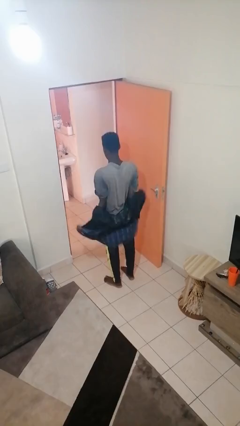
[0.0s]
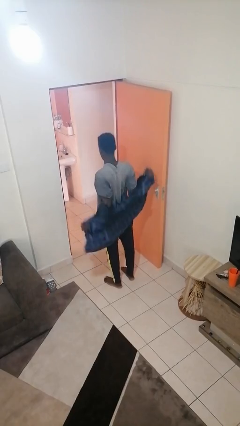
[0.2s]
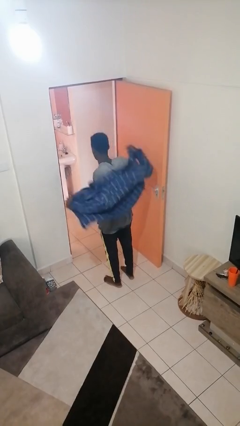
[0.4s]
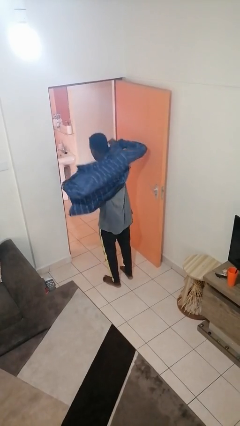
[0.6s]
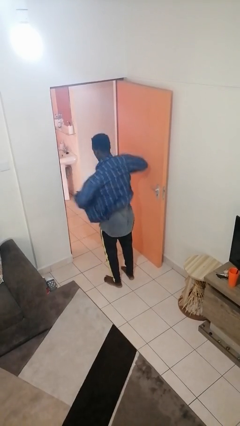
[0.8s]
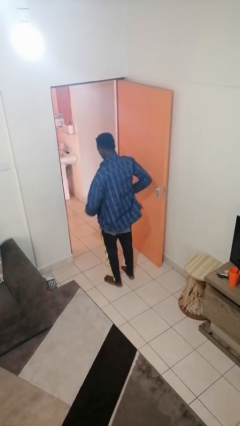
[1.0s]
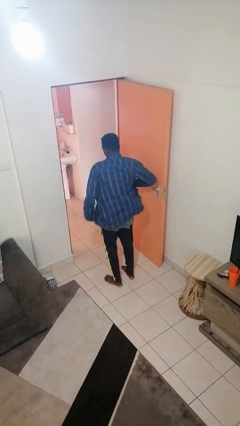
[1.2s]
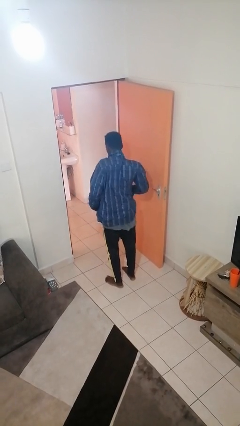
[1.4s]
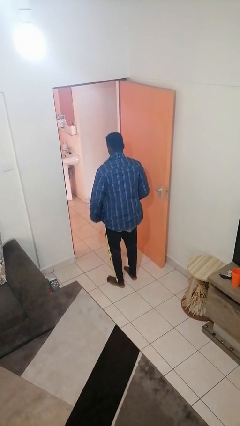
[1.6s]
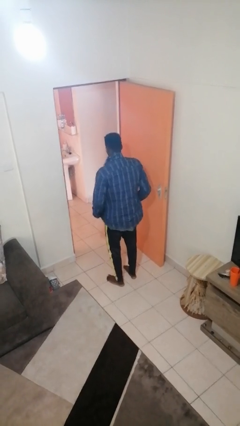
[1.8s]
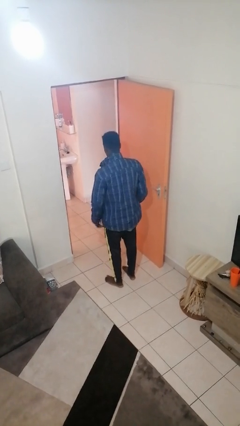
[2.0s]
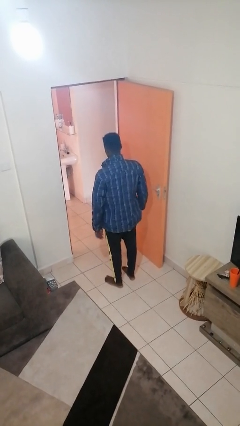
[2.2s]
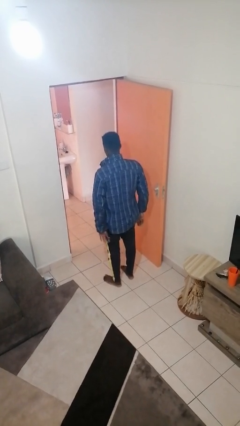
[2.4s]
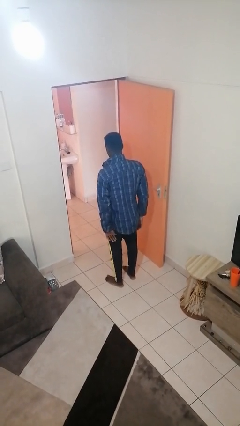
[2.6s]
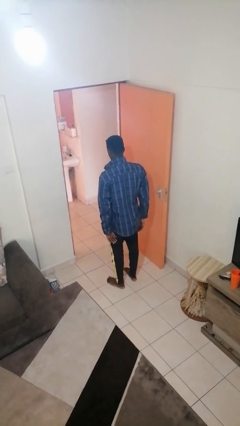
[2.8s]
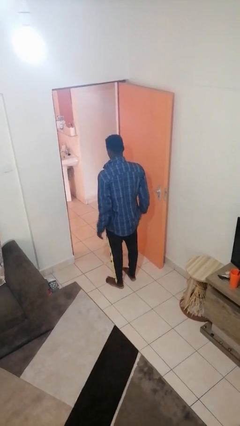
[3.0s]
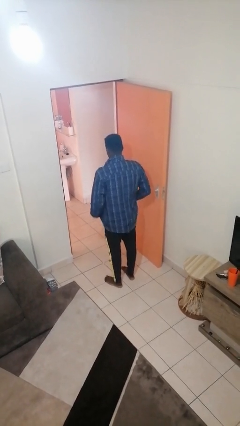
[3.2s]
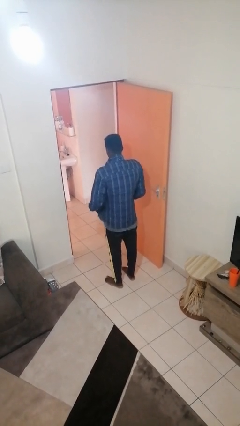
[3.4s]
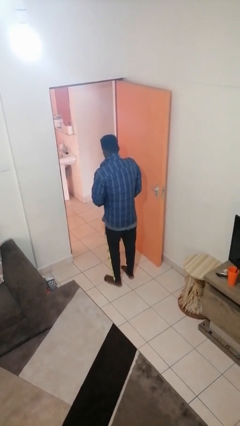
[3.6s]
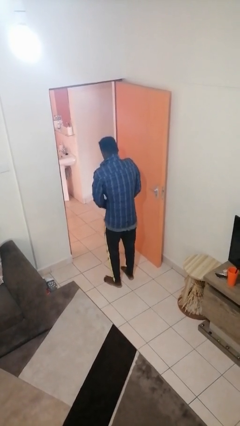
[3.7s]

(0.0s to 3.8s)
person puts on jacket

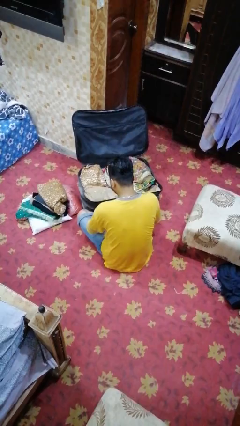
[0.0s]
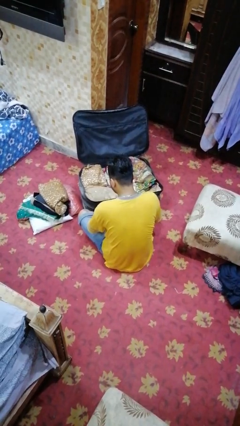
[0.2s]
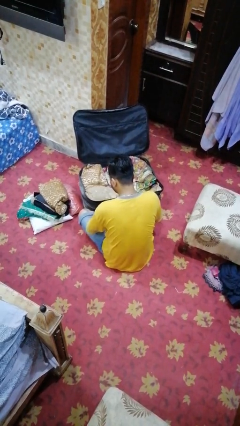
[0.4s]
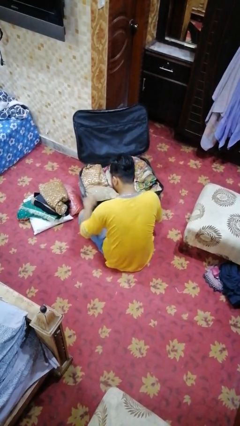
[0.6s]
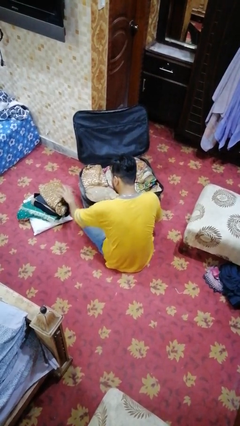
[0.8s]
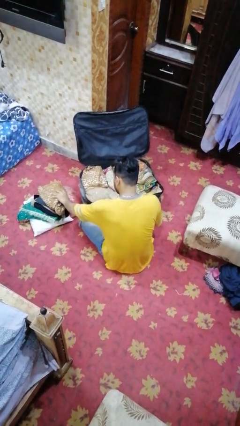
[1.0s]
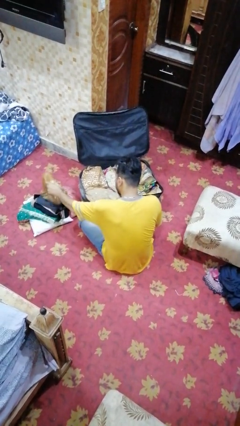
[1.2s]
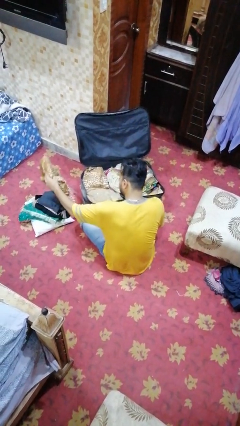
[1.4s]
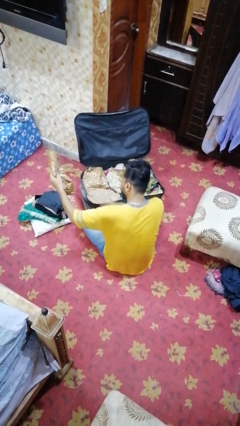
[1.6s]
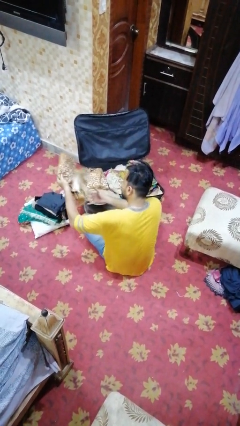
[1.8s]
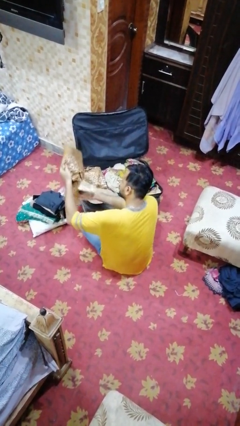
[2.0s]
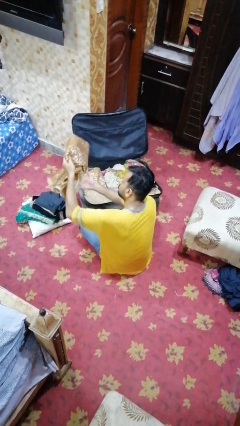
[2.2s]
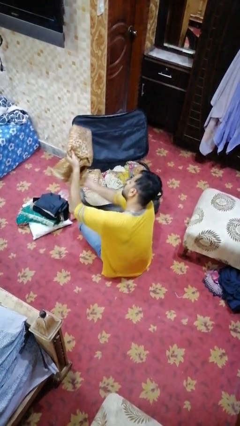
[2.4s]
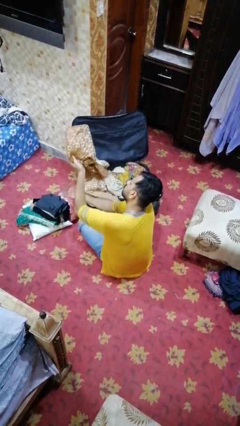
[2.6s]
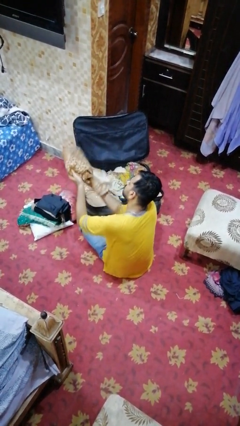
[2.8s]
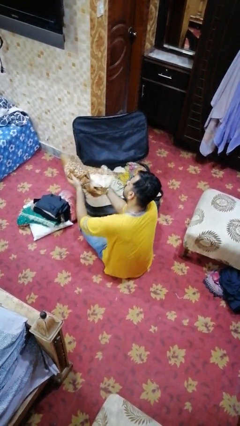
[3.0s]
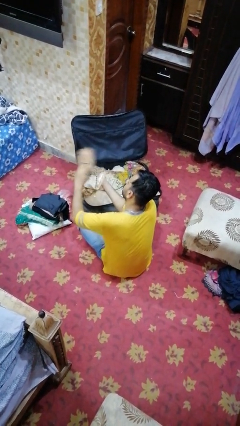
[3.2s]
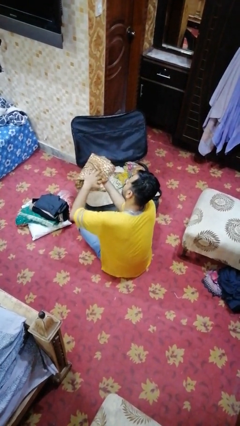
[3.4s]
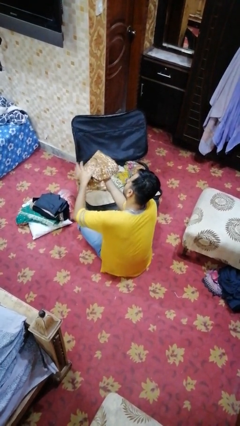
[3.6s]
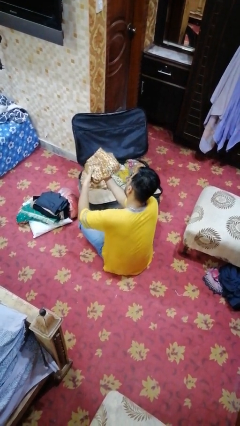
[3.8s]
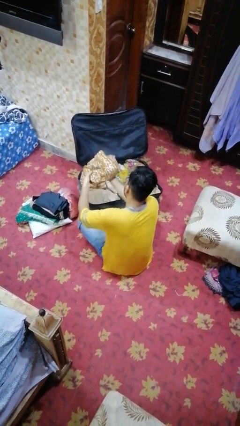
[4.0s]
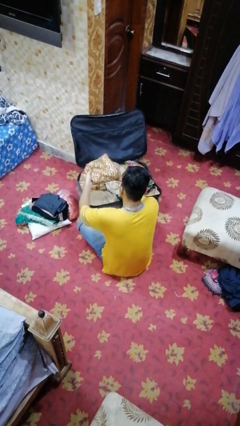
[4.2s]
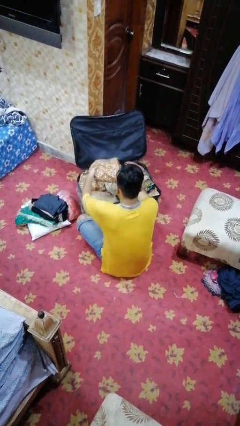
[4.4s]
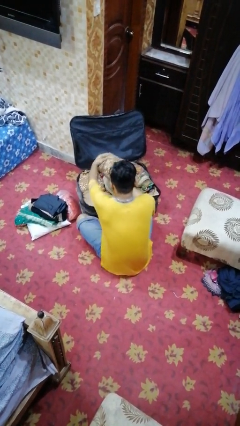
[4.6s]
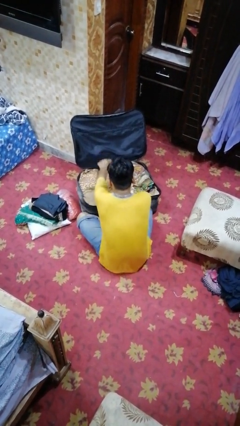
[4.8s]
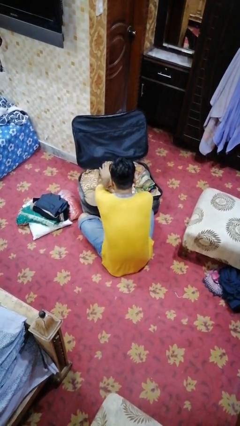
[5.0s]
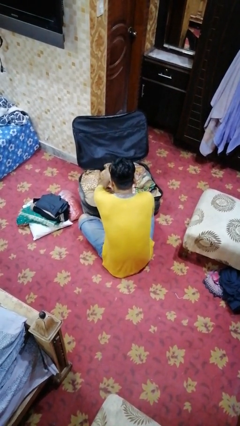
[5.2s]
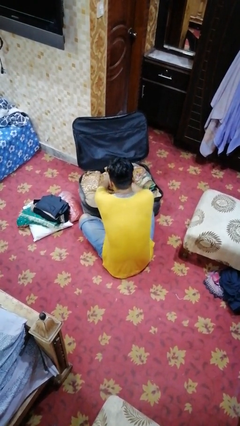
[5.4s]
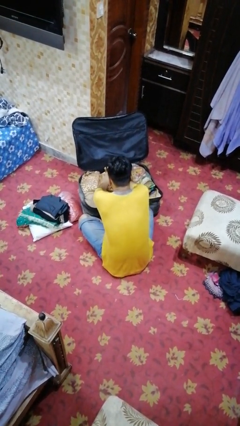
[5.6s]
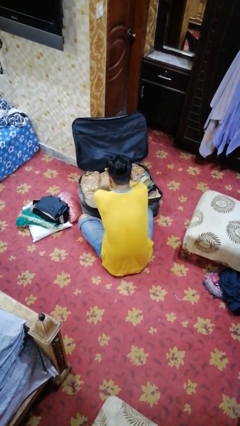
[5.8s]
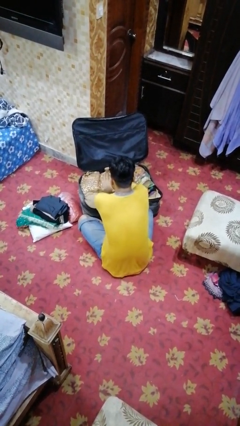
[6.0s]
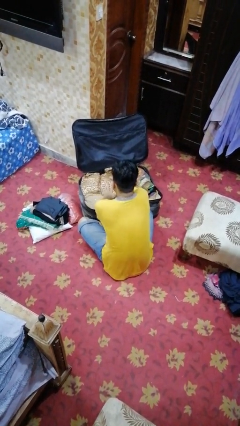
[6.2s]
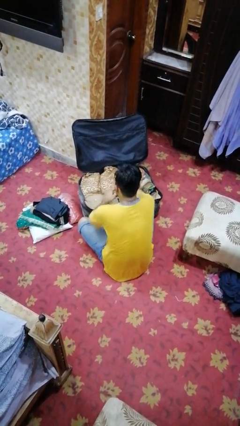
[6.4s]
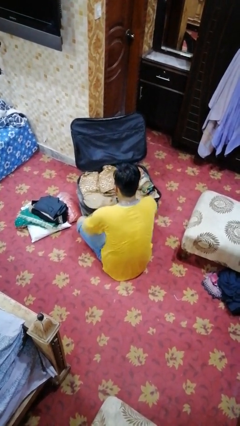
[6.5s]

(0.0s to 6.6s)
person loads clothes into suitcase

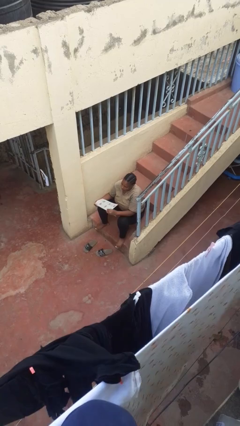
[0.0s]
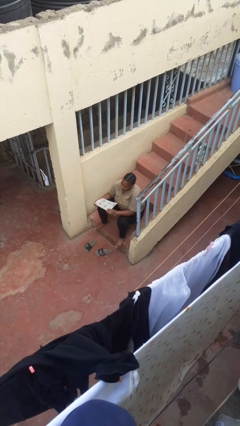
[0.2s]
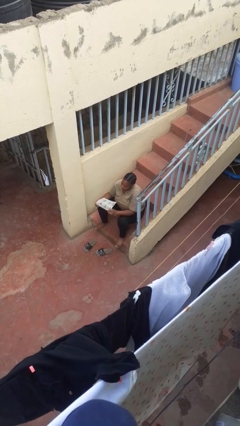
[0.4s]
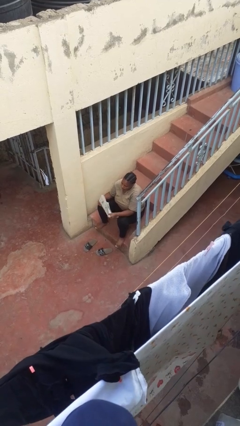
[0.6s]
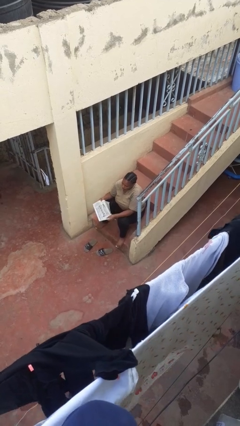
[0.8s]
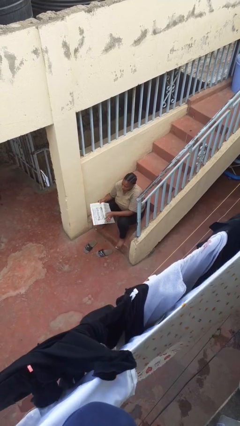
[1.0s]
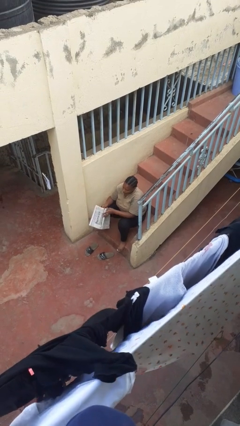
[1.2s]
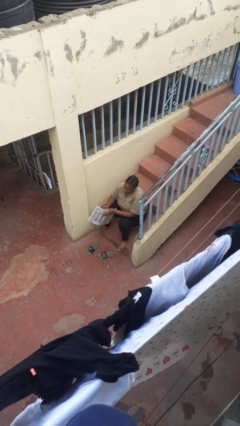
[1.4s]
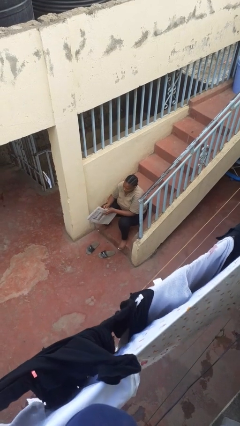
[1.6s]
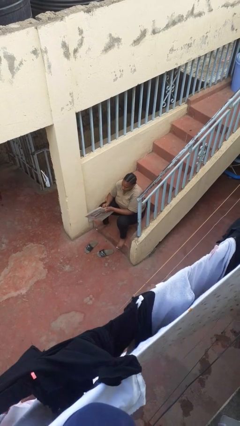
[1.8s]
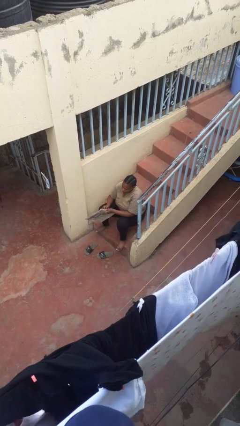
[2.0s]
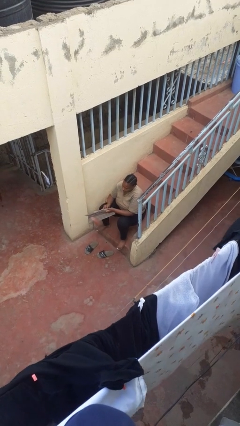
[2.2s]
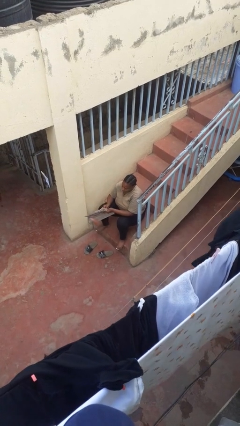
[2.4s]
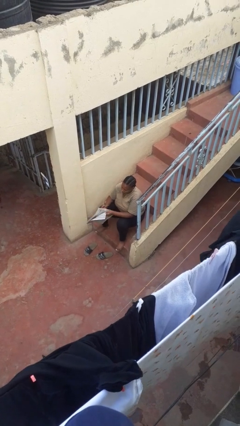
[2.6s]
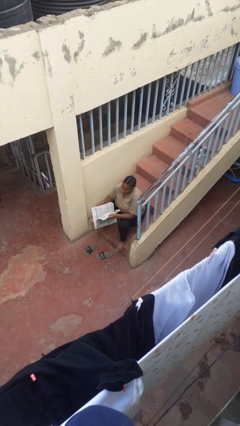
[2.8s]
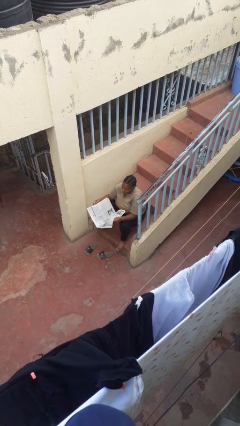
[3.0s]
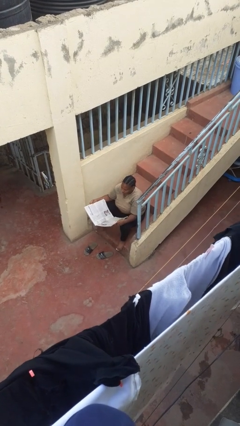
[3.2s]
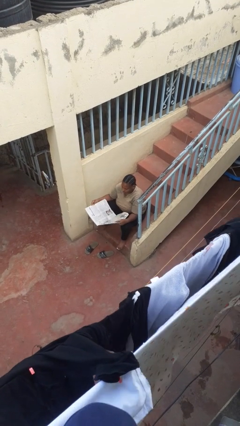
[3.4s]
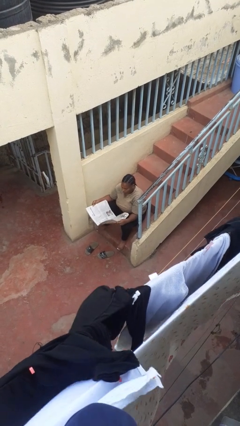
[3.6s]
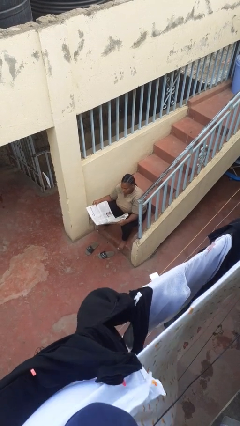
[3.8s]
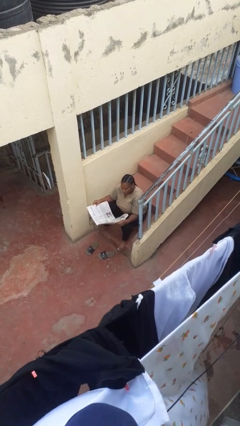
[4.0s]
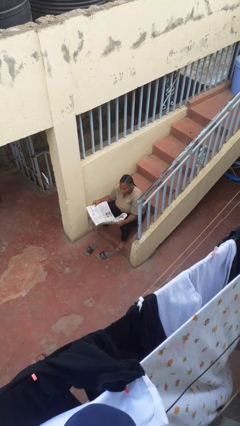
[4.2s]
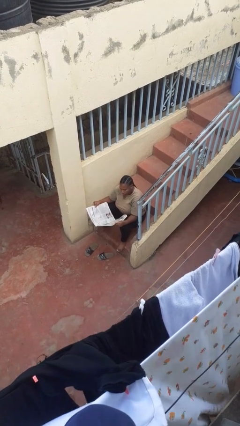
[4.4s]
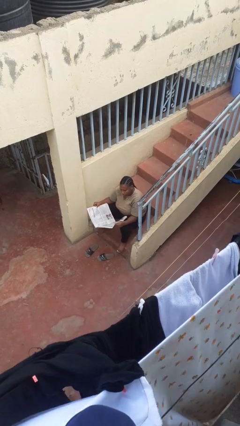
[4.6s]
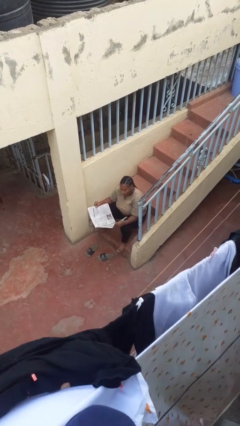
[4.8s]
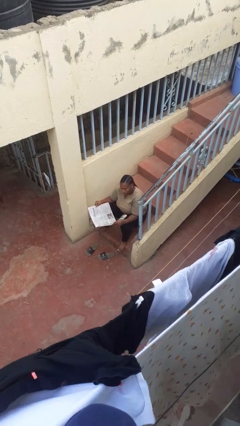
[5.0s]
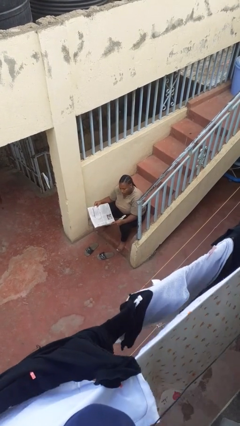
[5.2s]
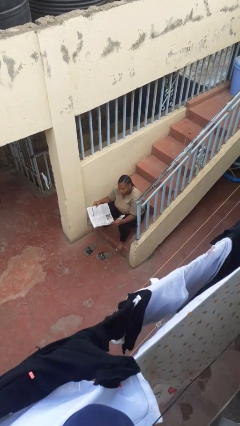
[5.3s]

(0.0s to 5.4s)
person reads newspaper

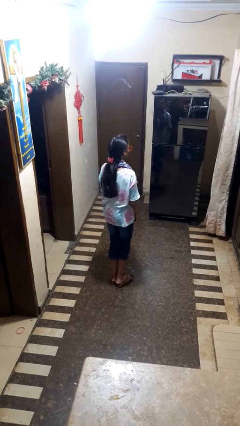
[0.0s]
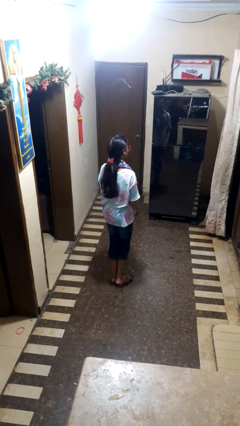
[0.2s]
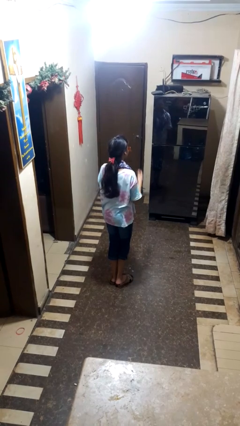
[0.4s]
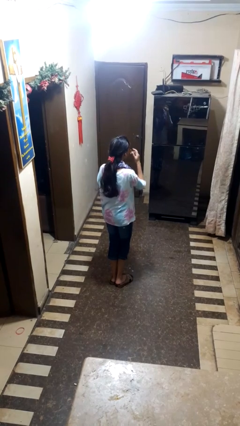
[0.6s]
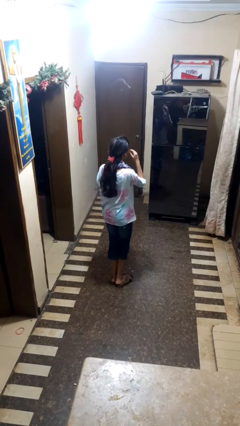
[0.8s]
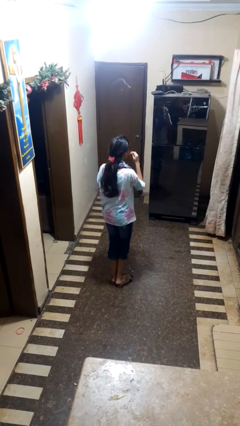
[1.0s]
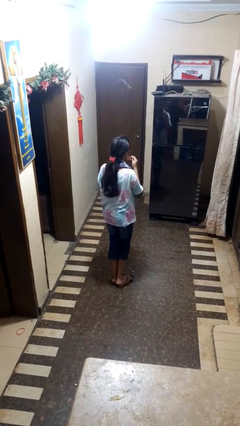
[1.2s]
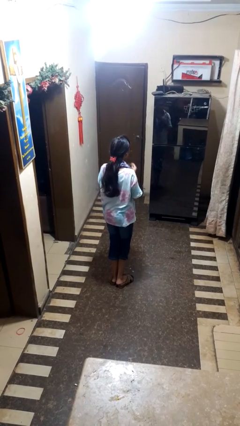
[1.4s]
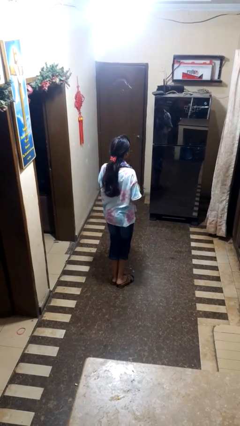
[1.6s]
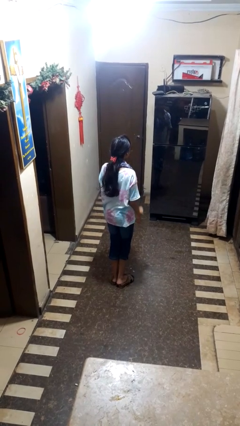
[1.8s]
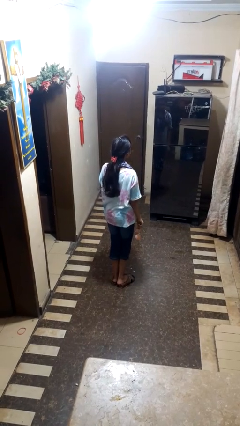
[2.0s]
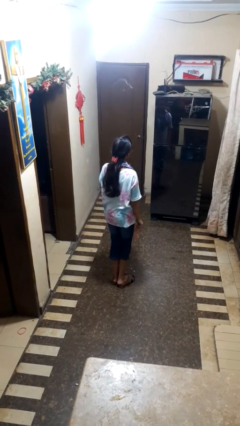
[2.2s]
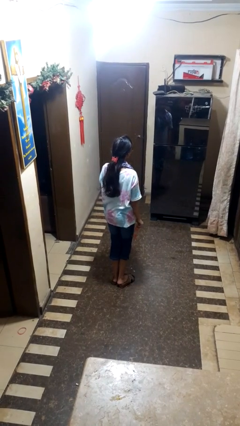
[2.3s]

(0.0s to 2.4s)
person takes off sunglasses
